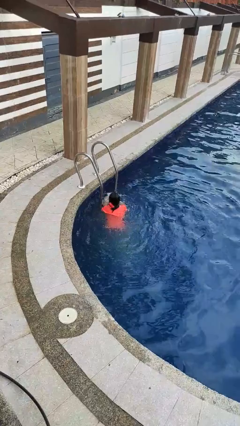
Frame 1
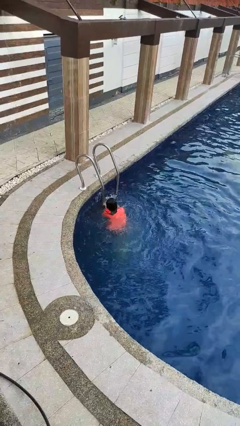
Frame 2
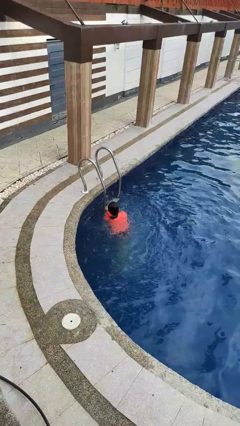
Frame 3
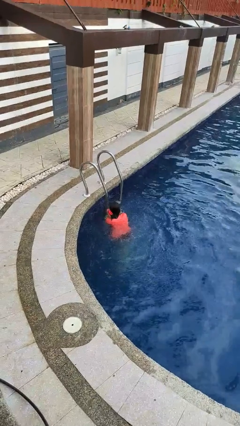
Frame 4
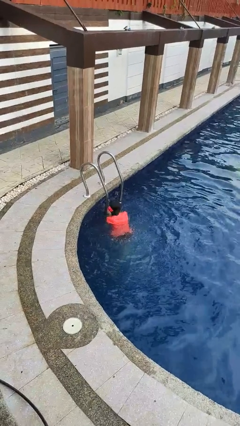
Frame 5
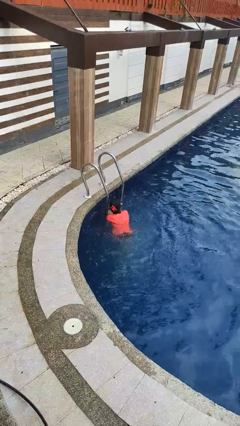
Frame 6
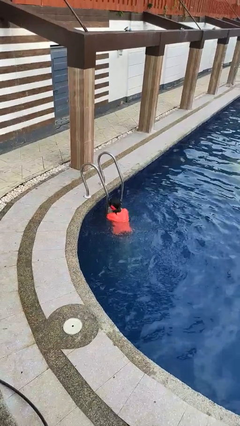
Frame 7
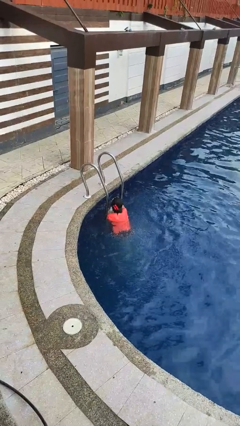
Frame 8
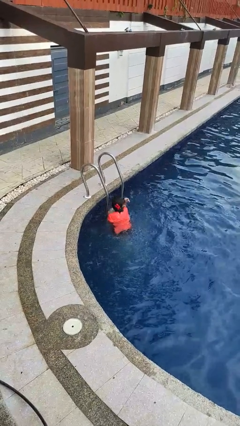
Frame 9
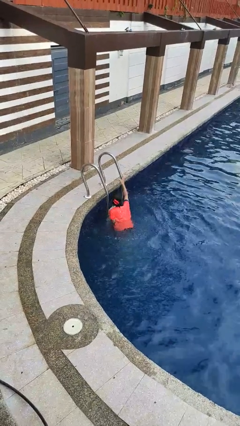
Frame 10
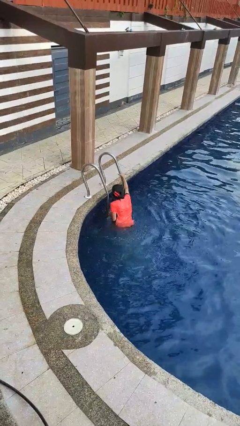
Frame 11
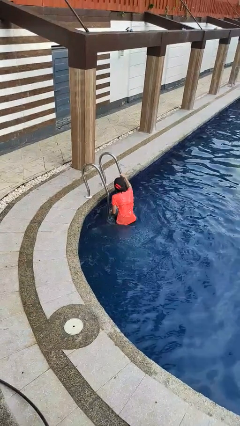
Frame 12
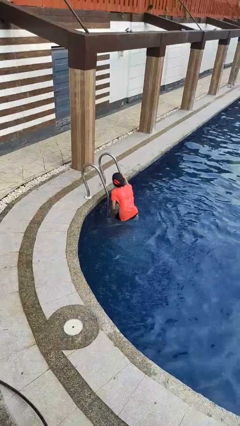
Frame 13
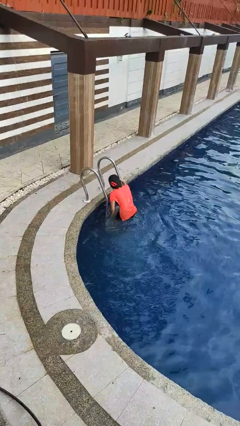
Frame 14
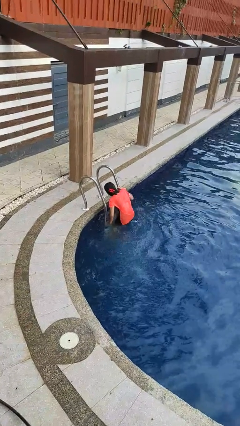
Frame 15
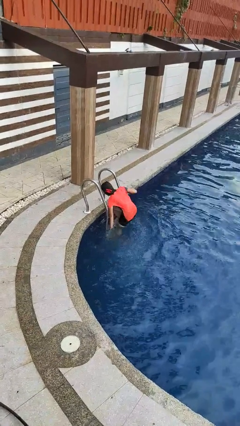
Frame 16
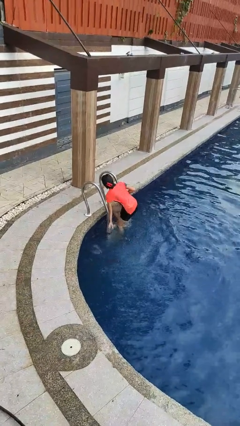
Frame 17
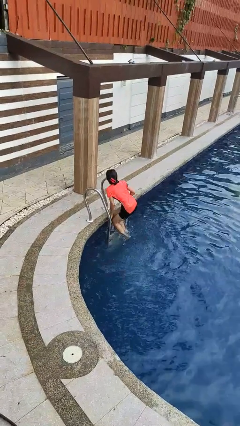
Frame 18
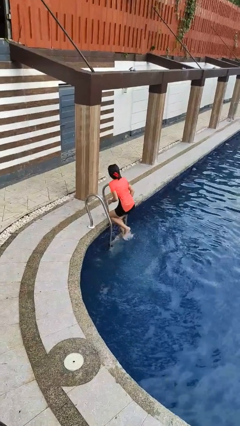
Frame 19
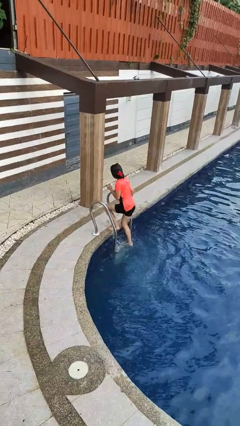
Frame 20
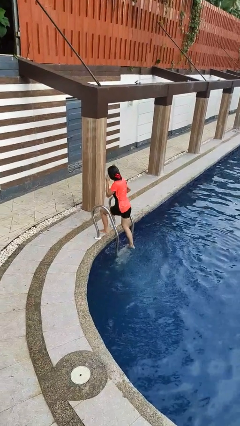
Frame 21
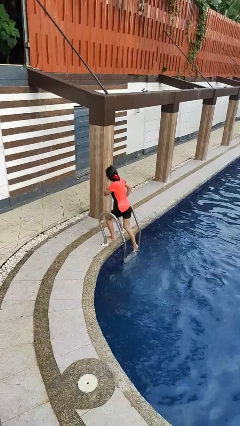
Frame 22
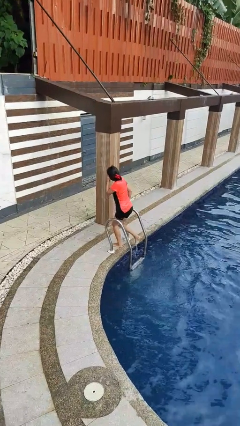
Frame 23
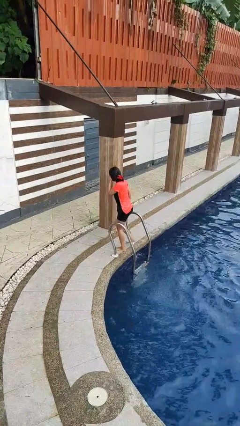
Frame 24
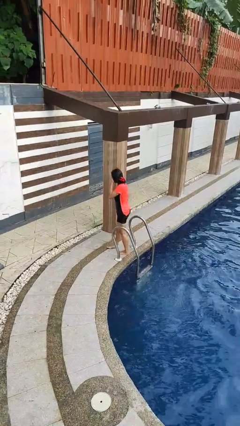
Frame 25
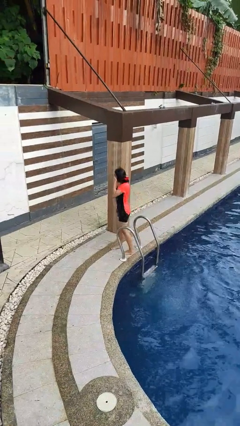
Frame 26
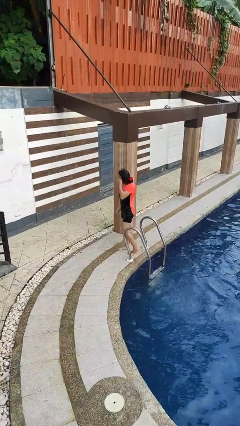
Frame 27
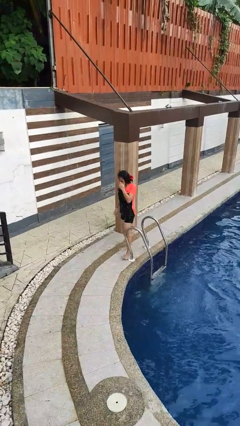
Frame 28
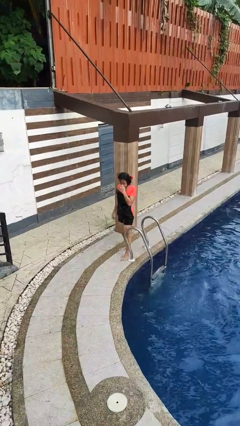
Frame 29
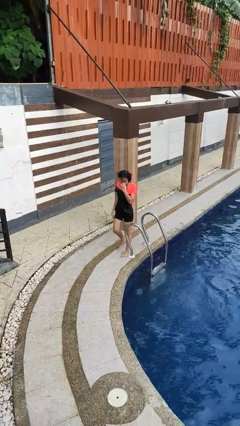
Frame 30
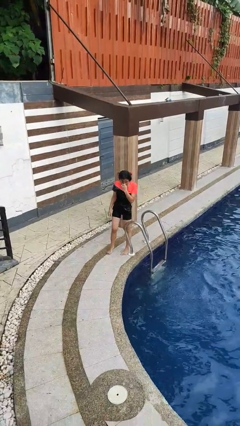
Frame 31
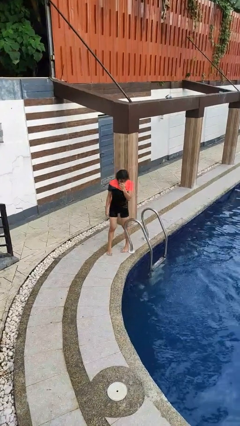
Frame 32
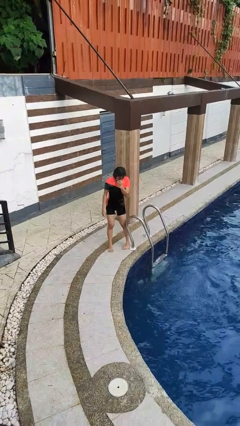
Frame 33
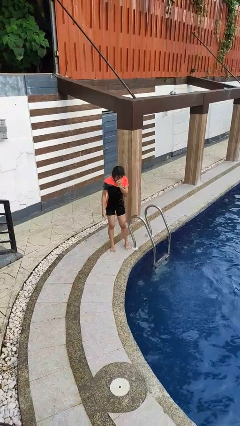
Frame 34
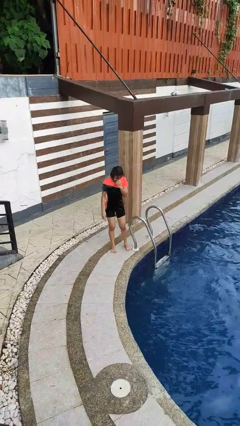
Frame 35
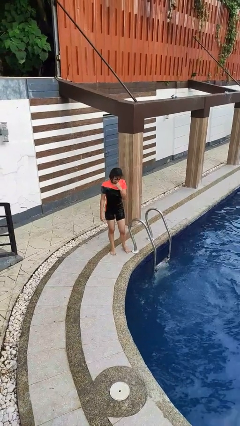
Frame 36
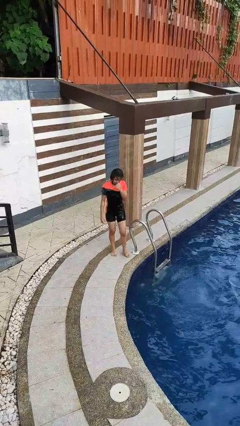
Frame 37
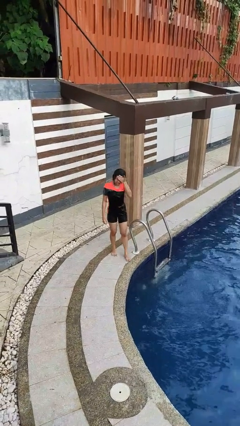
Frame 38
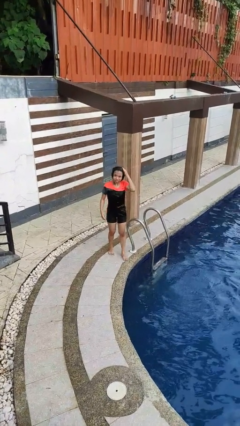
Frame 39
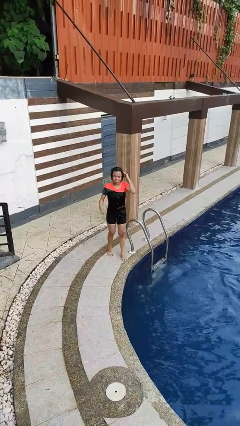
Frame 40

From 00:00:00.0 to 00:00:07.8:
person exits pool

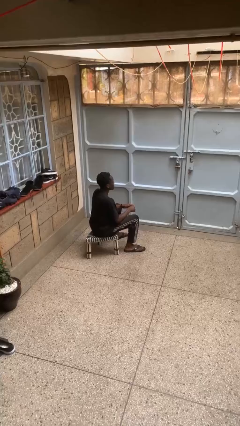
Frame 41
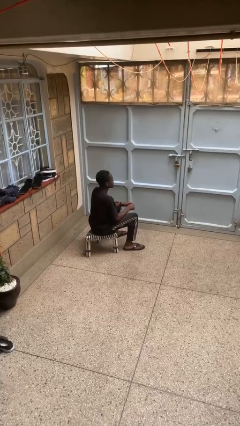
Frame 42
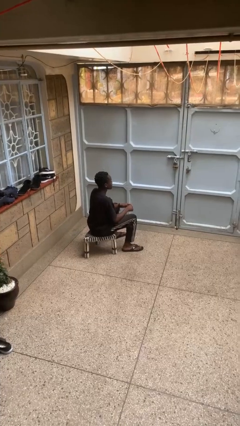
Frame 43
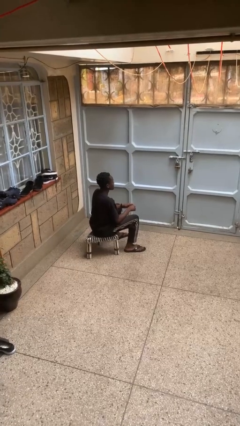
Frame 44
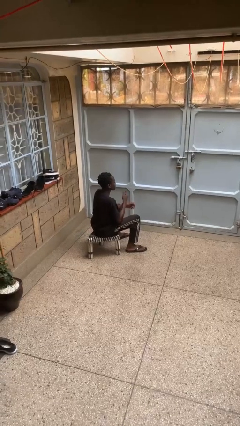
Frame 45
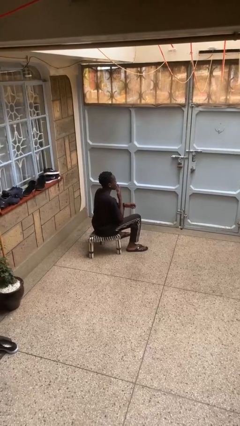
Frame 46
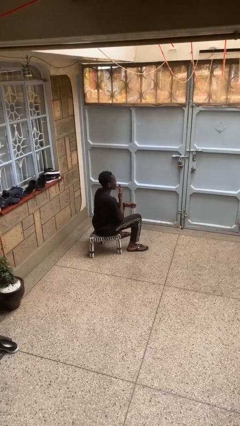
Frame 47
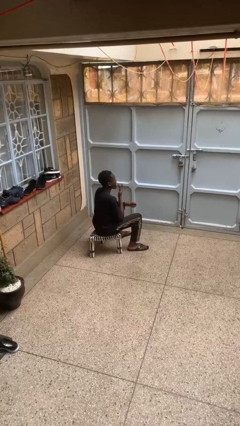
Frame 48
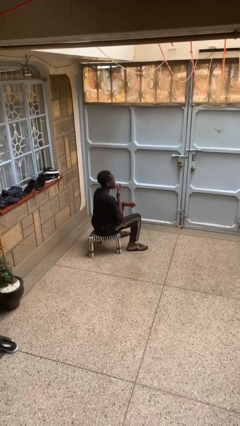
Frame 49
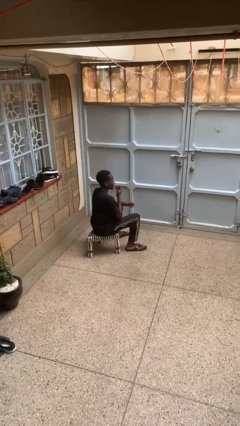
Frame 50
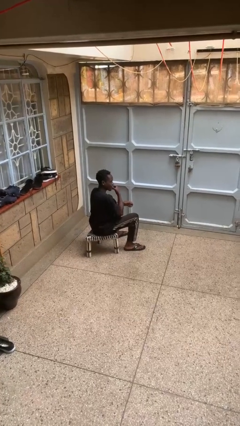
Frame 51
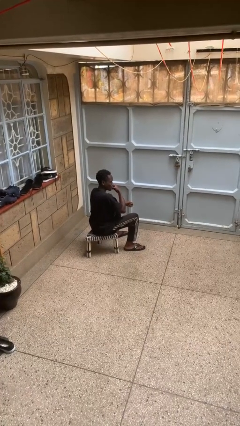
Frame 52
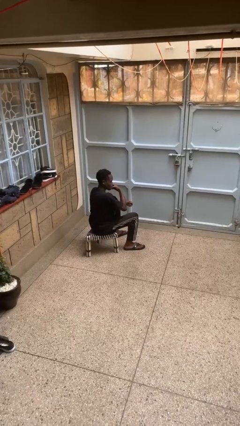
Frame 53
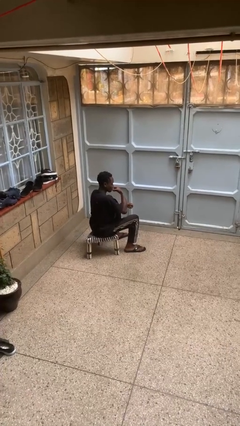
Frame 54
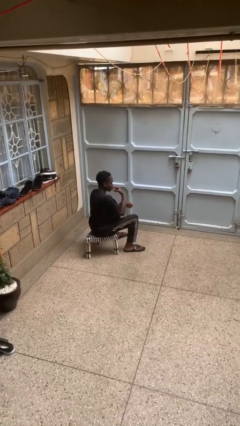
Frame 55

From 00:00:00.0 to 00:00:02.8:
person licks fingers

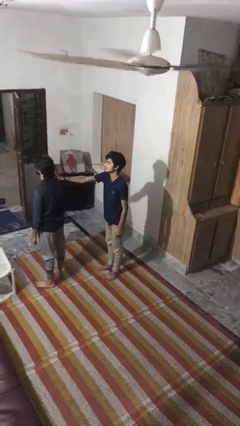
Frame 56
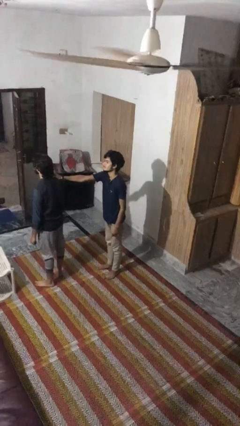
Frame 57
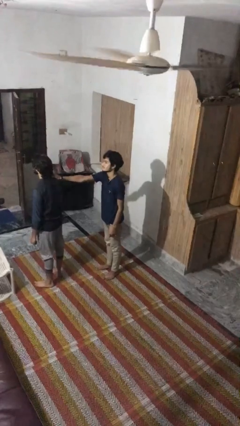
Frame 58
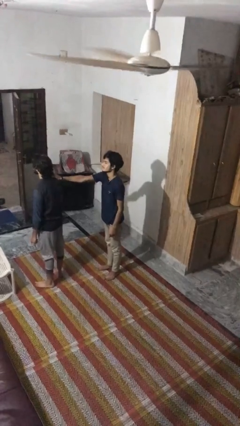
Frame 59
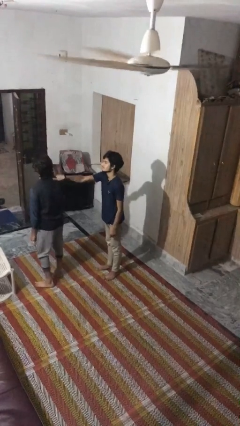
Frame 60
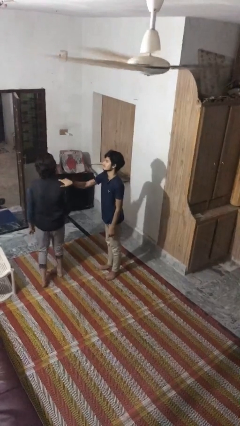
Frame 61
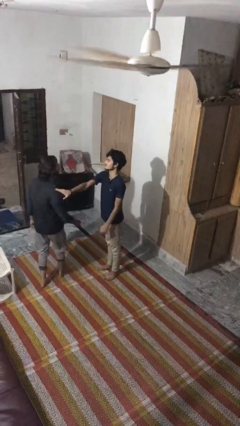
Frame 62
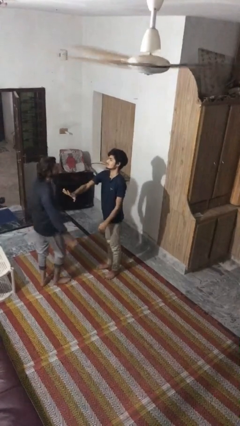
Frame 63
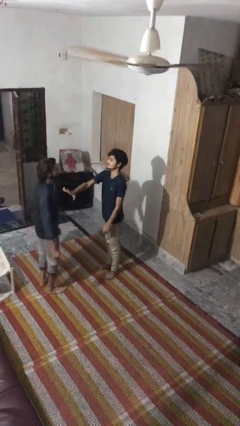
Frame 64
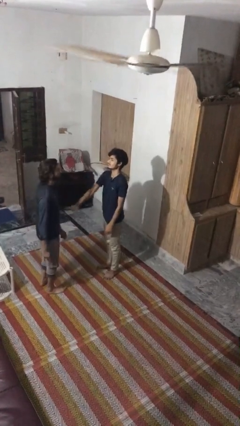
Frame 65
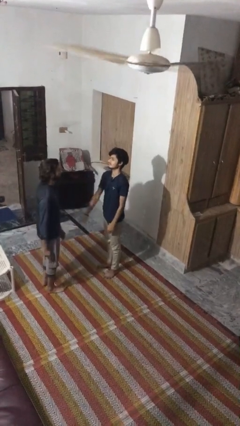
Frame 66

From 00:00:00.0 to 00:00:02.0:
person spins person around

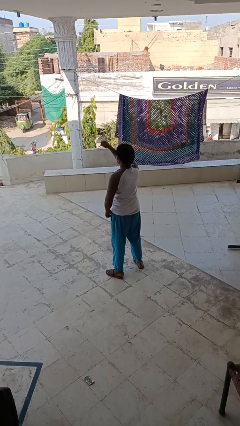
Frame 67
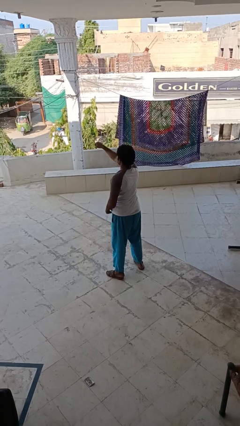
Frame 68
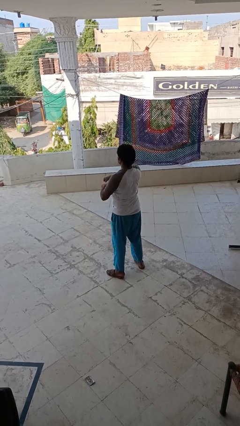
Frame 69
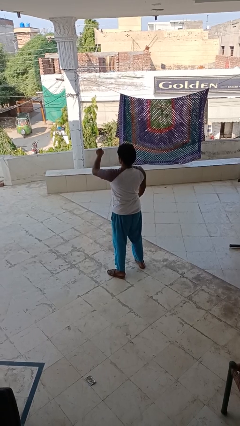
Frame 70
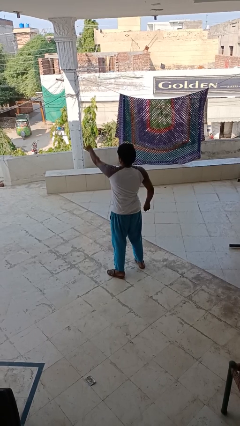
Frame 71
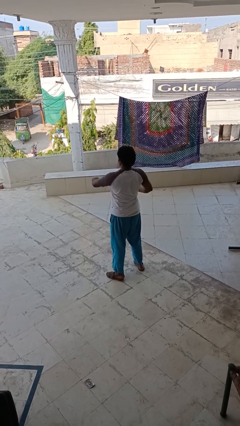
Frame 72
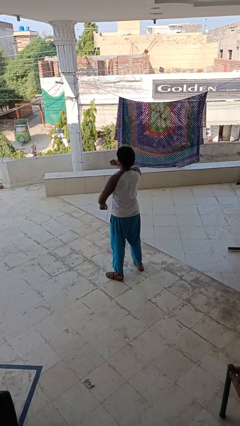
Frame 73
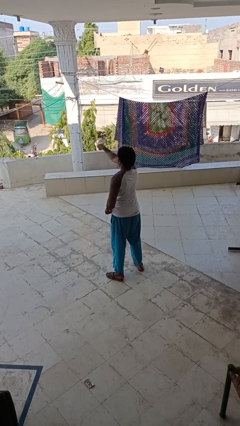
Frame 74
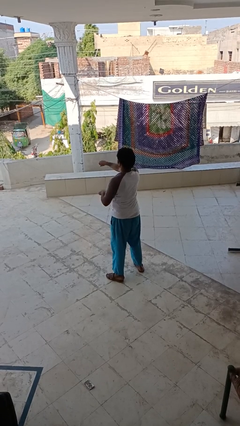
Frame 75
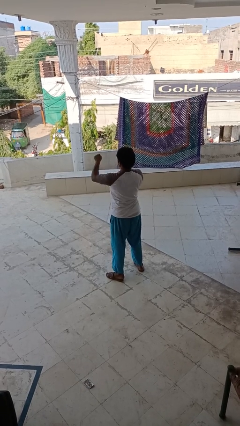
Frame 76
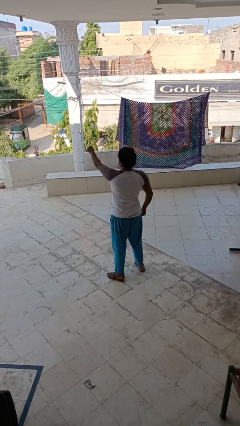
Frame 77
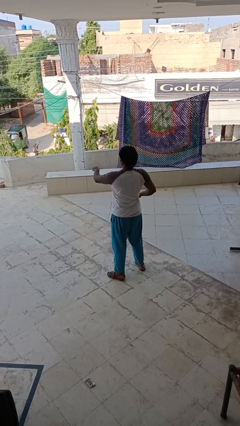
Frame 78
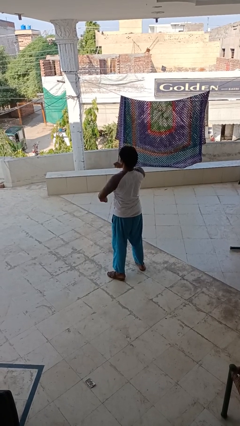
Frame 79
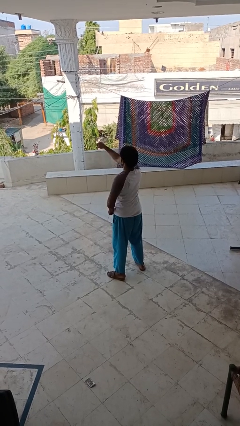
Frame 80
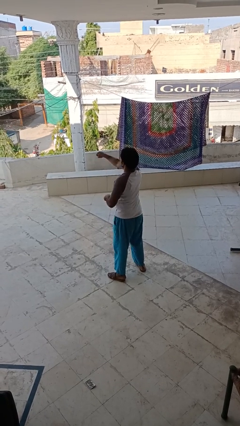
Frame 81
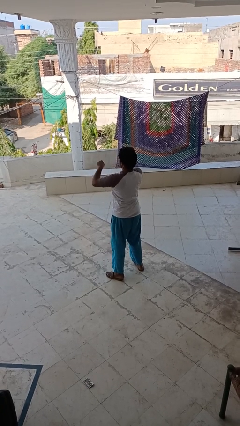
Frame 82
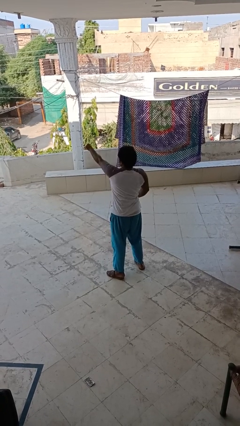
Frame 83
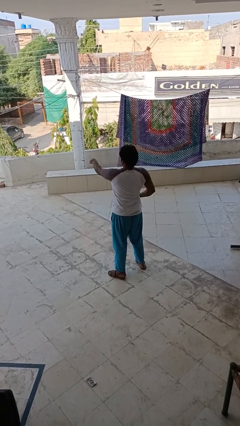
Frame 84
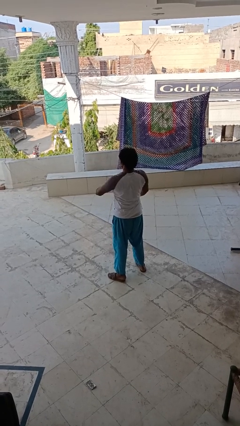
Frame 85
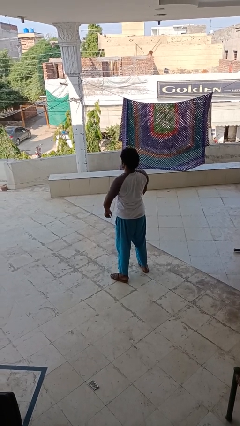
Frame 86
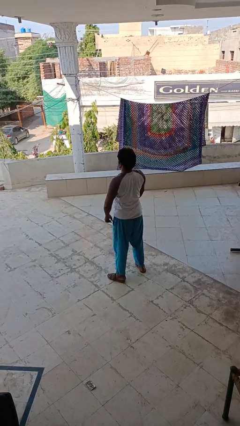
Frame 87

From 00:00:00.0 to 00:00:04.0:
person punches

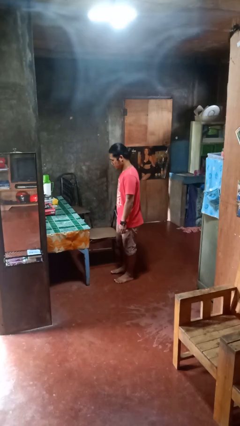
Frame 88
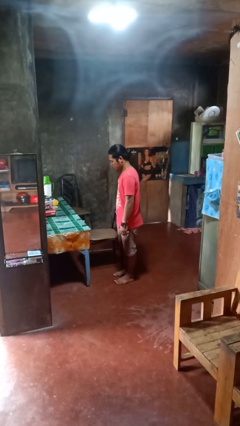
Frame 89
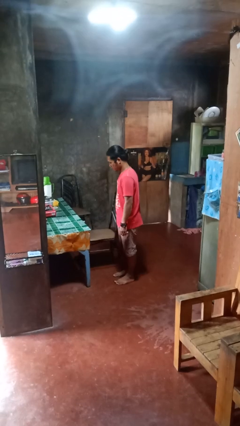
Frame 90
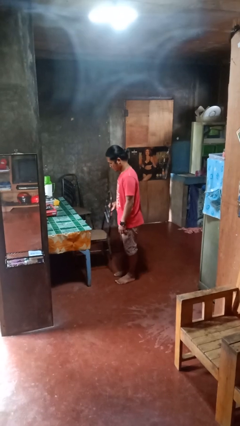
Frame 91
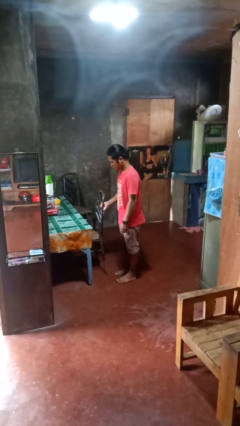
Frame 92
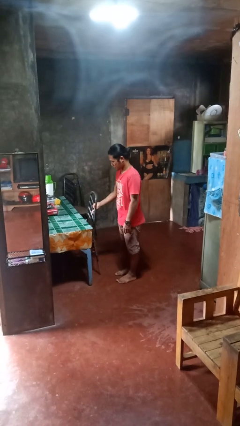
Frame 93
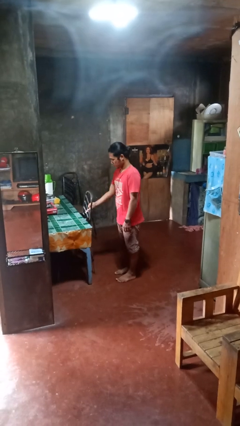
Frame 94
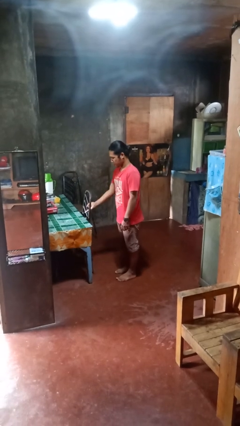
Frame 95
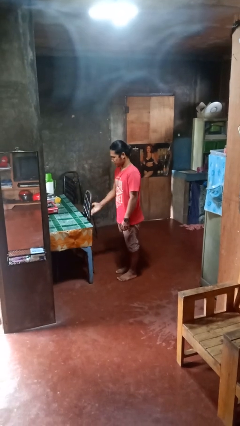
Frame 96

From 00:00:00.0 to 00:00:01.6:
person pushes in chair
